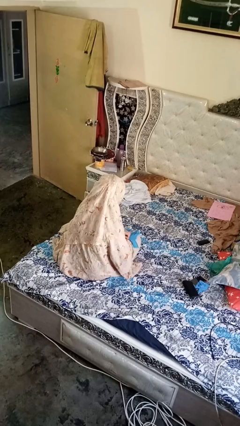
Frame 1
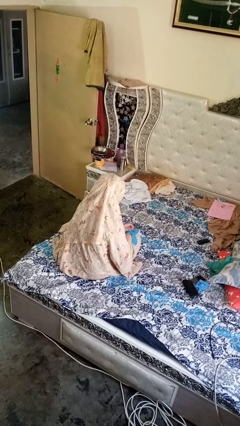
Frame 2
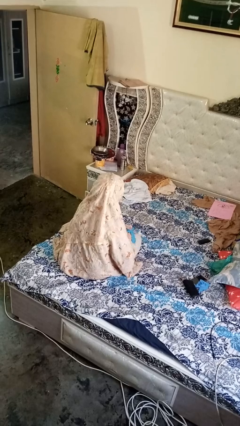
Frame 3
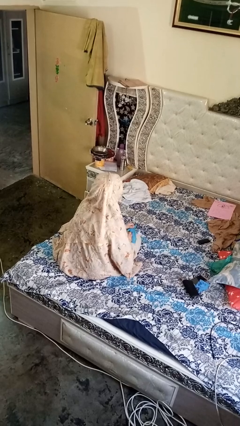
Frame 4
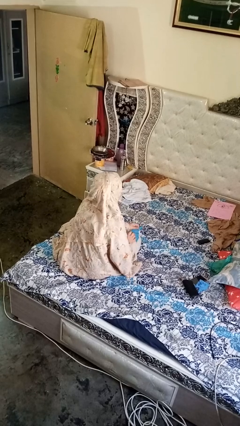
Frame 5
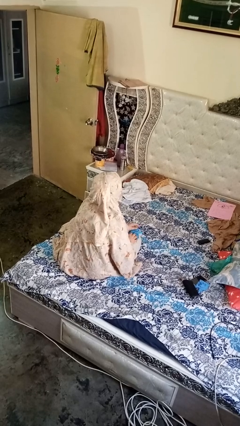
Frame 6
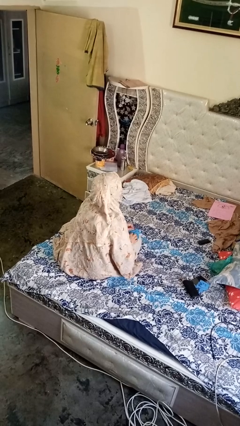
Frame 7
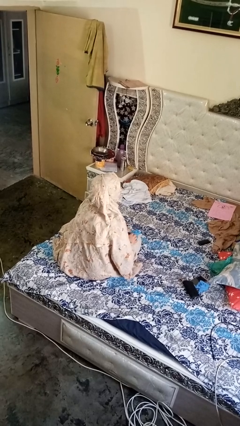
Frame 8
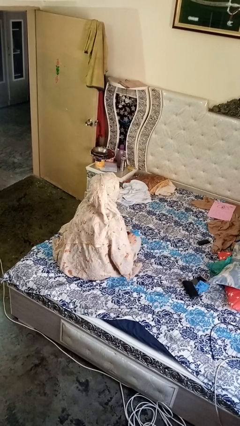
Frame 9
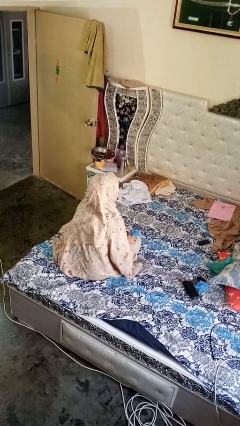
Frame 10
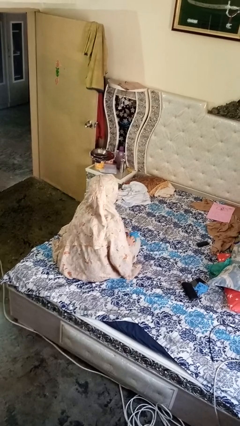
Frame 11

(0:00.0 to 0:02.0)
person takes off gloves

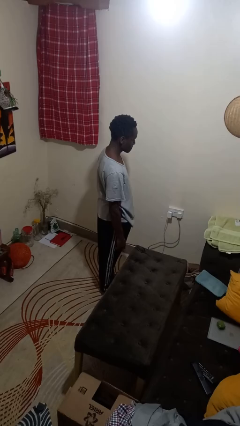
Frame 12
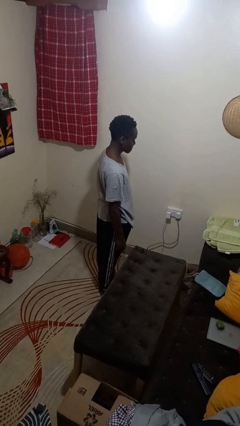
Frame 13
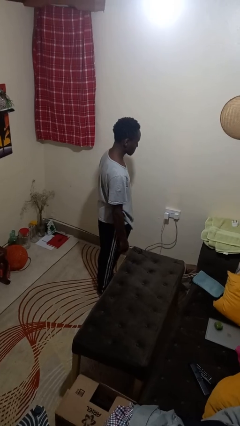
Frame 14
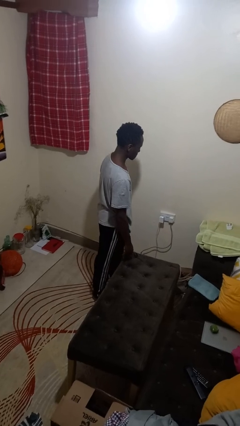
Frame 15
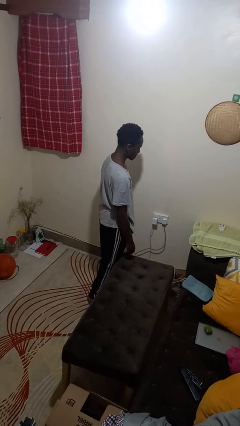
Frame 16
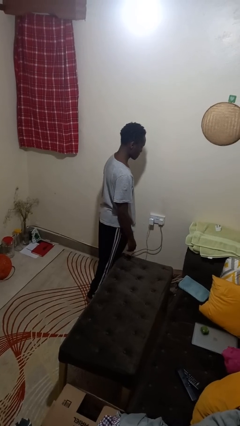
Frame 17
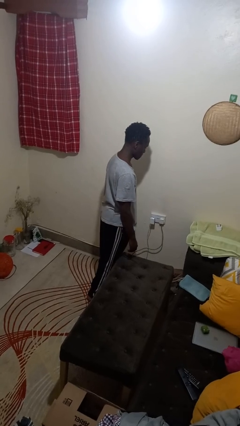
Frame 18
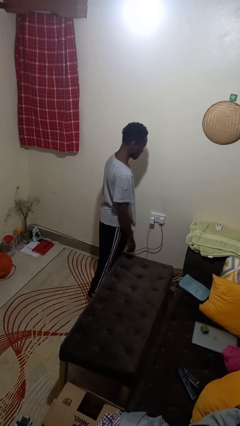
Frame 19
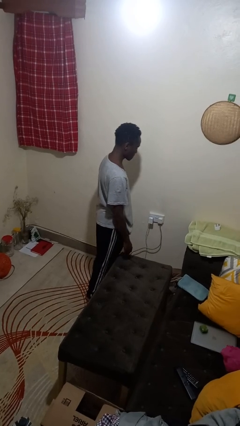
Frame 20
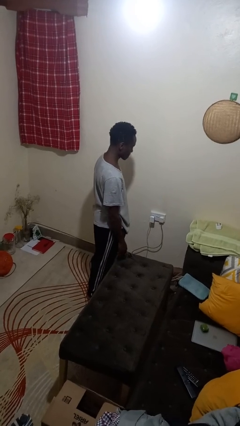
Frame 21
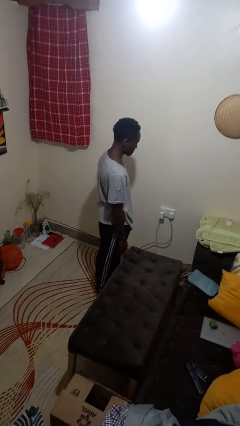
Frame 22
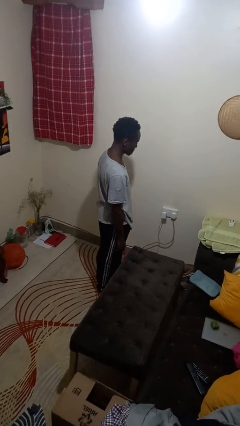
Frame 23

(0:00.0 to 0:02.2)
person bumps into table

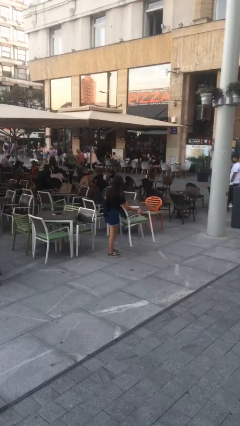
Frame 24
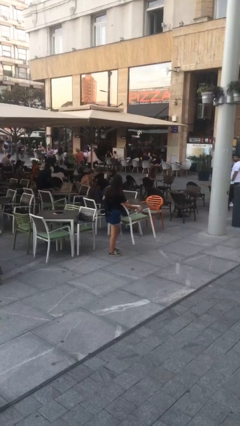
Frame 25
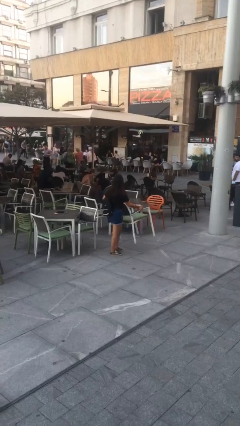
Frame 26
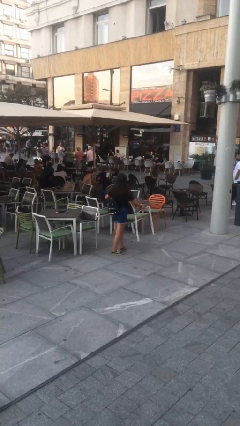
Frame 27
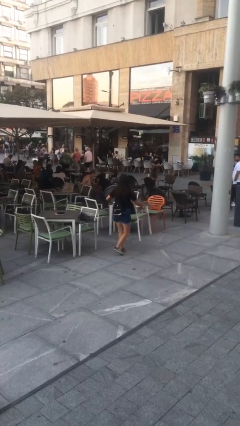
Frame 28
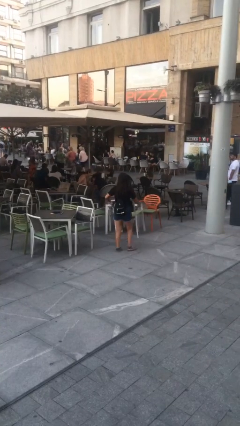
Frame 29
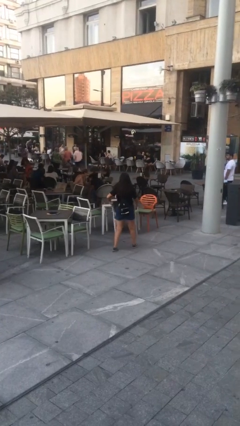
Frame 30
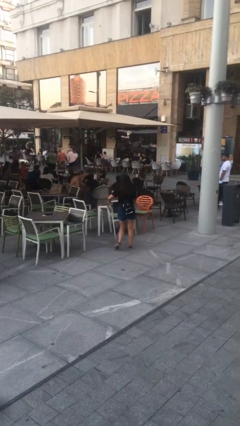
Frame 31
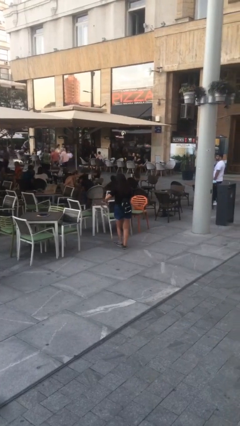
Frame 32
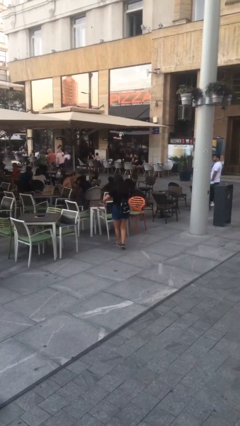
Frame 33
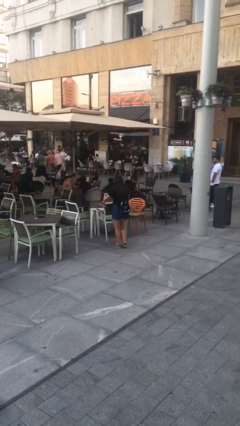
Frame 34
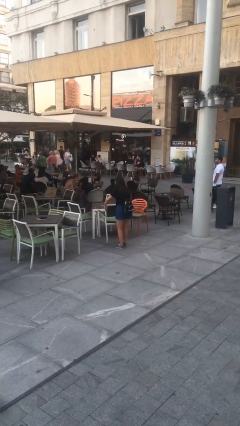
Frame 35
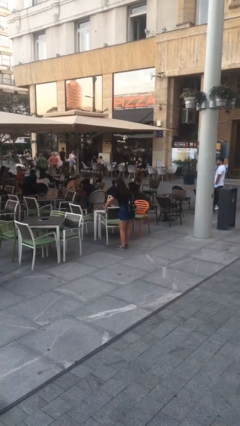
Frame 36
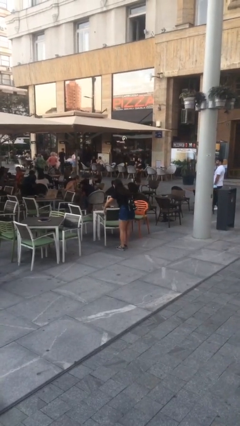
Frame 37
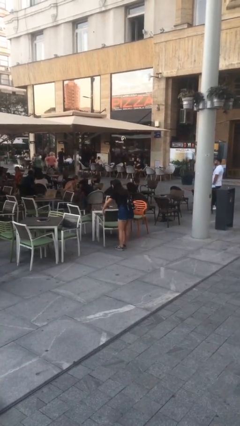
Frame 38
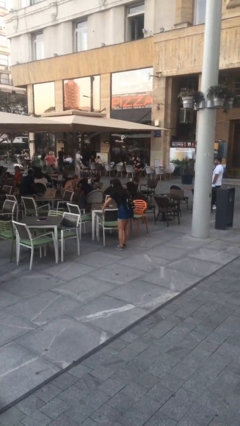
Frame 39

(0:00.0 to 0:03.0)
person carries heavy object

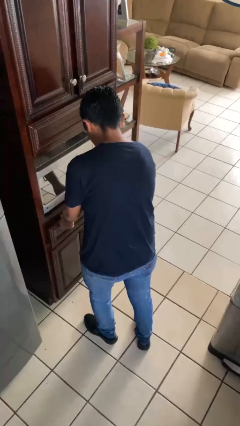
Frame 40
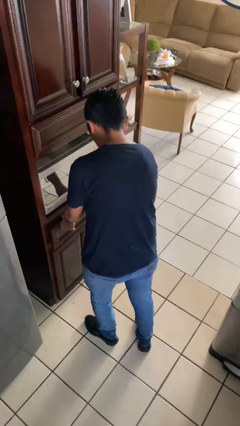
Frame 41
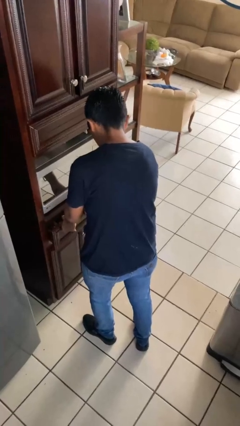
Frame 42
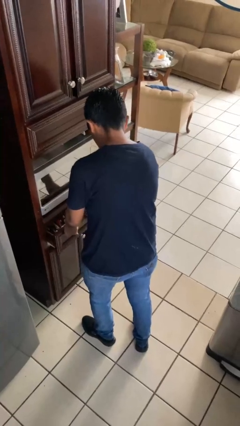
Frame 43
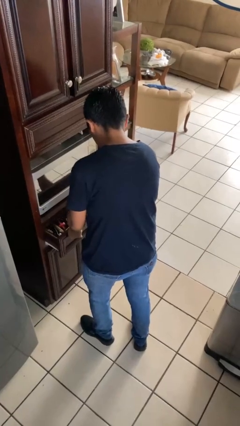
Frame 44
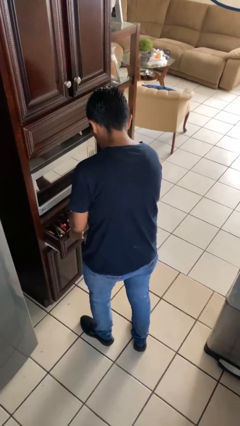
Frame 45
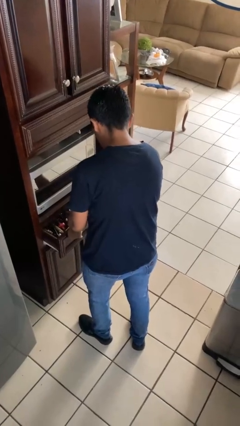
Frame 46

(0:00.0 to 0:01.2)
person opens kitchen drawer

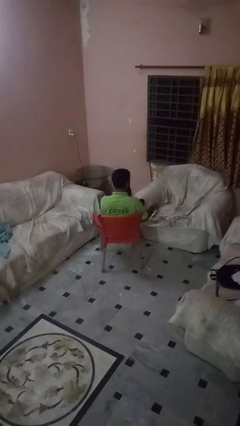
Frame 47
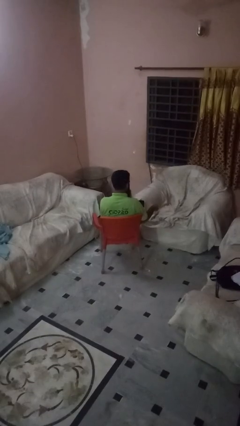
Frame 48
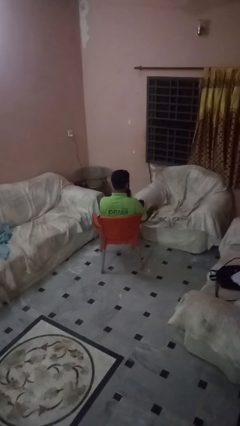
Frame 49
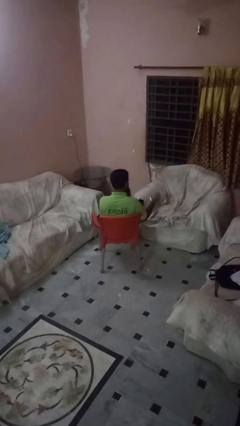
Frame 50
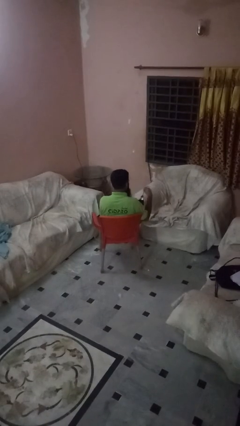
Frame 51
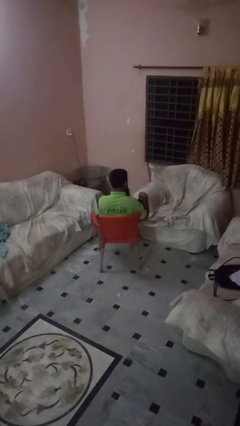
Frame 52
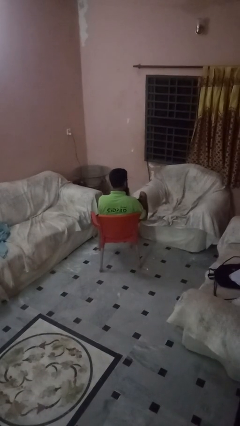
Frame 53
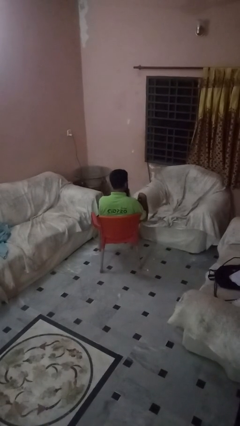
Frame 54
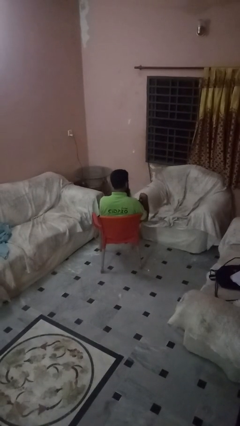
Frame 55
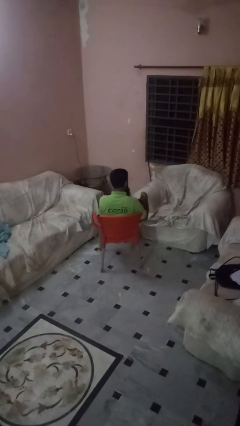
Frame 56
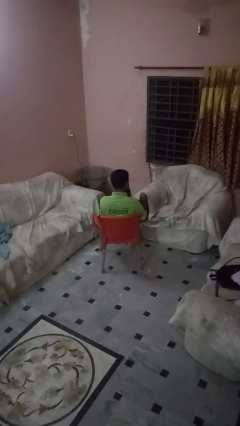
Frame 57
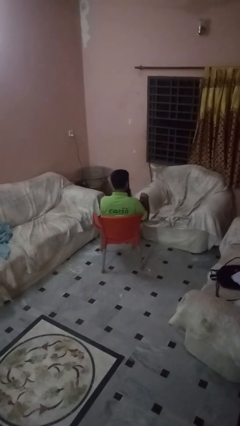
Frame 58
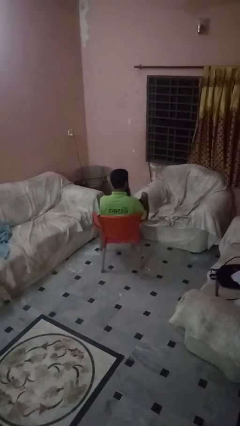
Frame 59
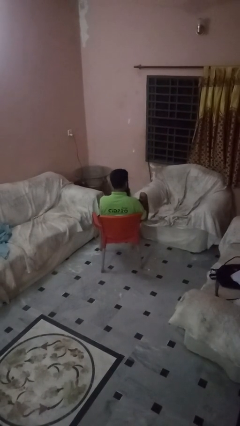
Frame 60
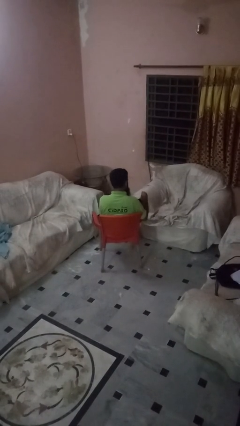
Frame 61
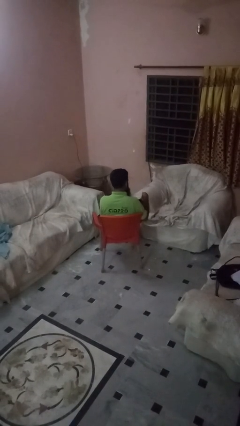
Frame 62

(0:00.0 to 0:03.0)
person stirs mug

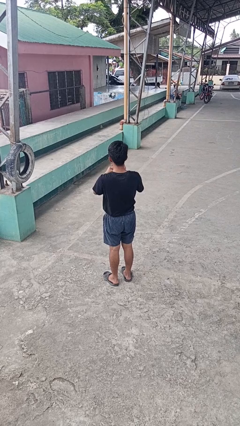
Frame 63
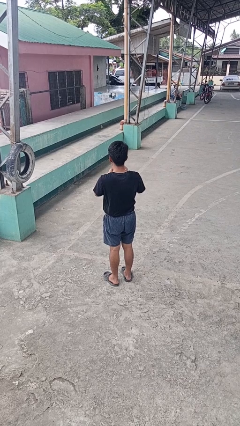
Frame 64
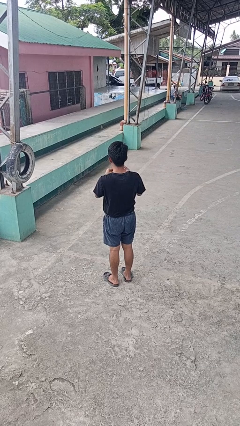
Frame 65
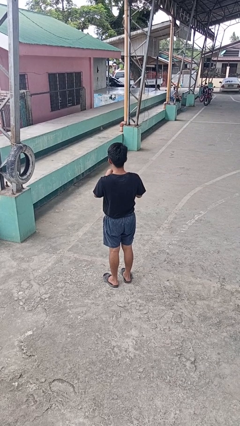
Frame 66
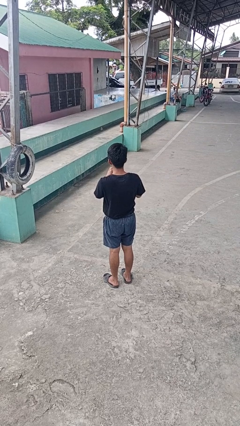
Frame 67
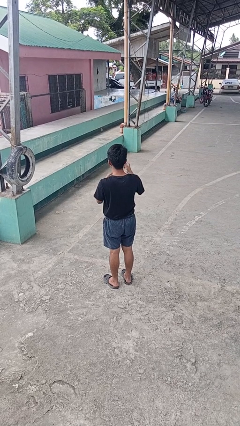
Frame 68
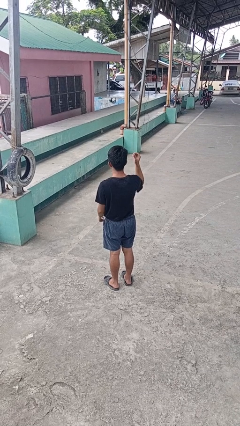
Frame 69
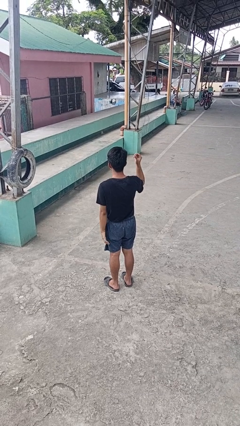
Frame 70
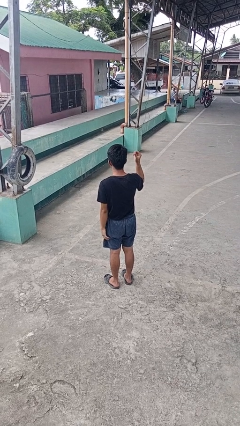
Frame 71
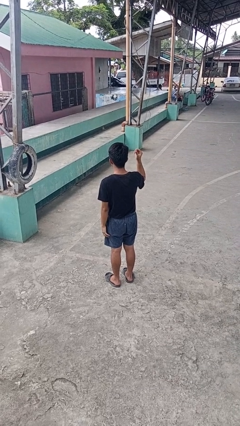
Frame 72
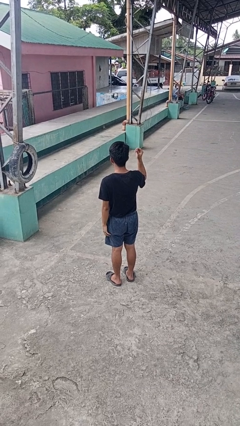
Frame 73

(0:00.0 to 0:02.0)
person takes off ring

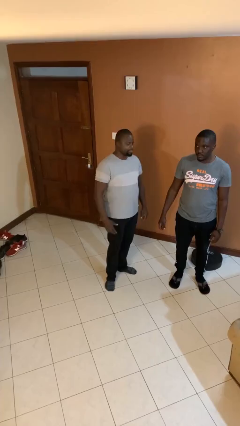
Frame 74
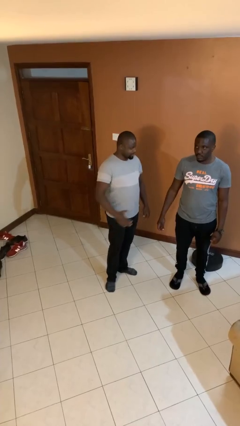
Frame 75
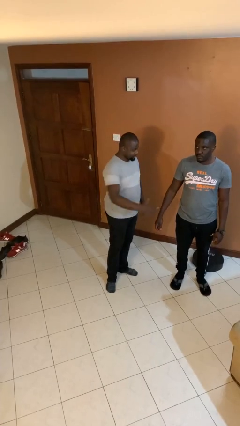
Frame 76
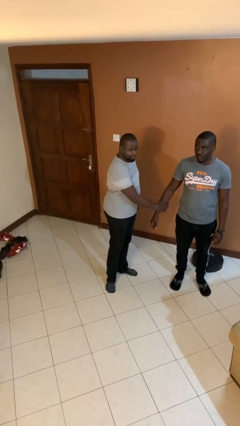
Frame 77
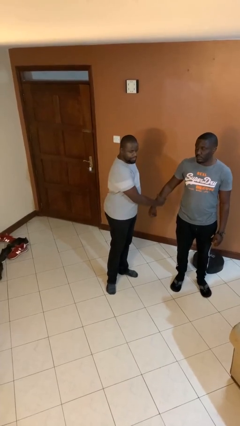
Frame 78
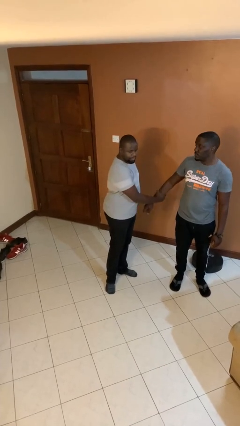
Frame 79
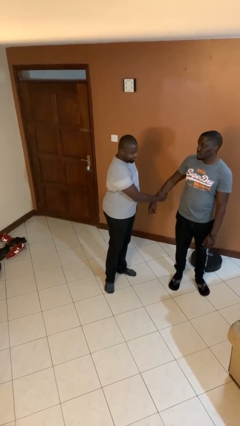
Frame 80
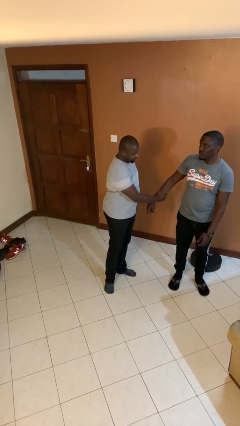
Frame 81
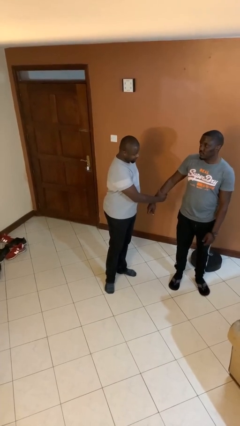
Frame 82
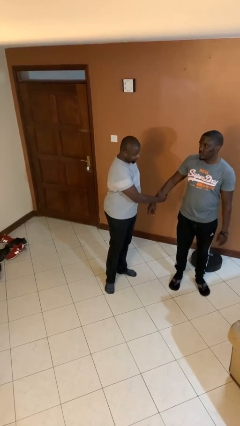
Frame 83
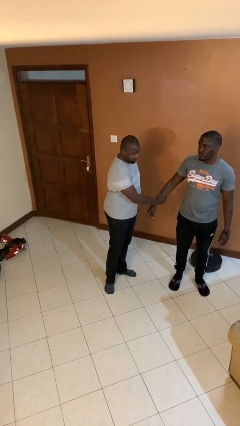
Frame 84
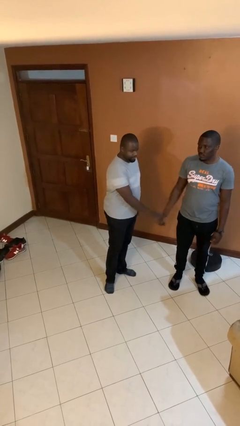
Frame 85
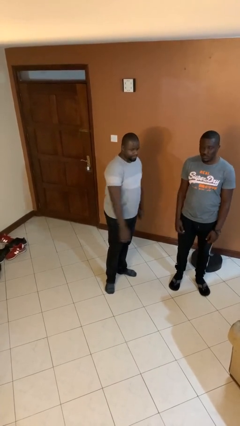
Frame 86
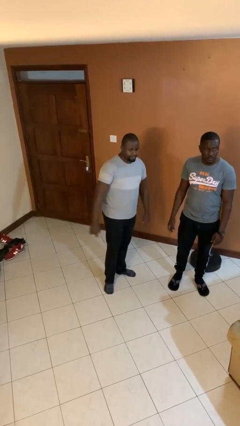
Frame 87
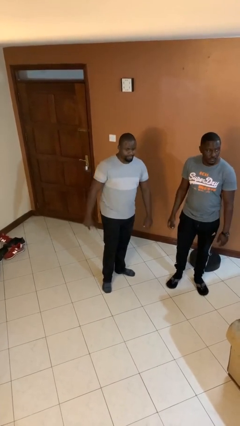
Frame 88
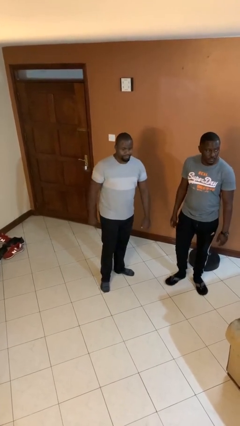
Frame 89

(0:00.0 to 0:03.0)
person grabs person by forearm

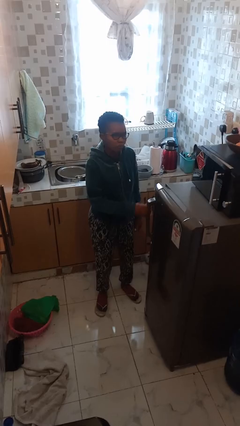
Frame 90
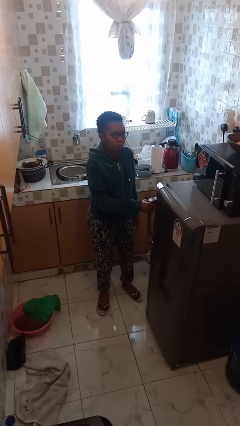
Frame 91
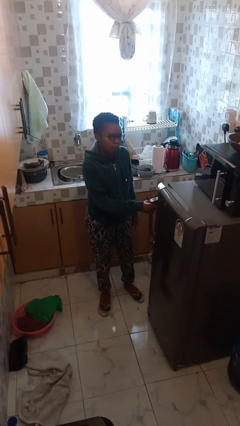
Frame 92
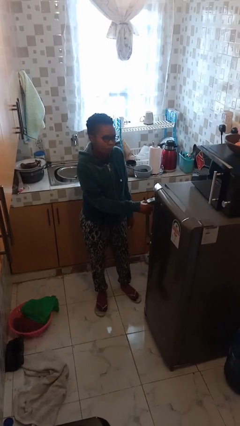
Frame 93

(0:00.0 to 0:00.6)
person opens refrigerator
